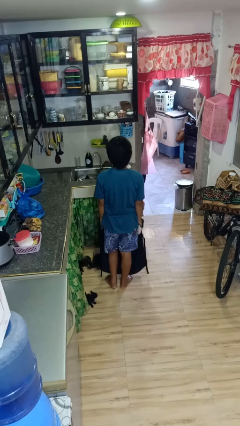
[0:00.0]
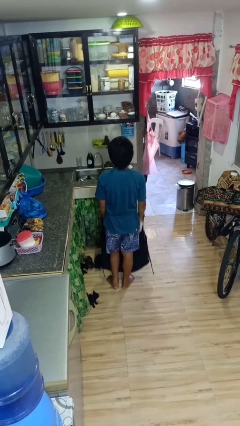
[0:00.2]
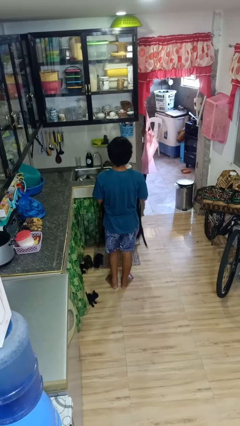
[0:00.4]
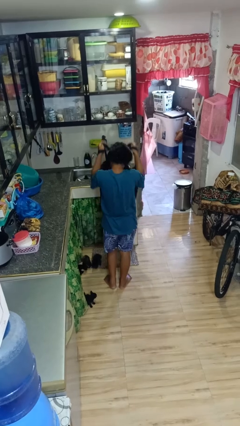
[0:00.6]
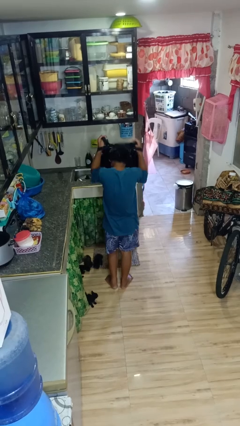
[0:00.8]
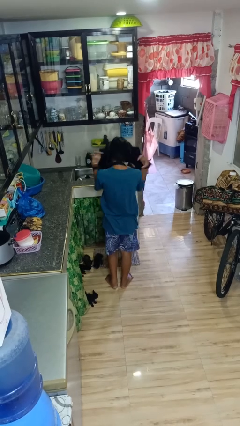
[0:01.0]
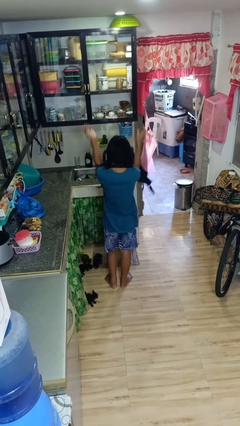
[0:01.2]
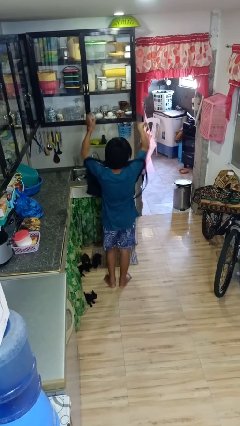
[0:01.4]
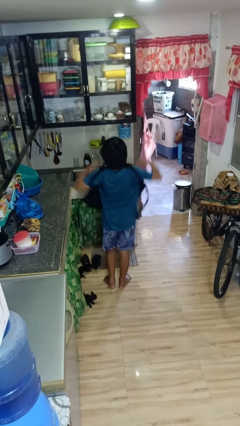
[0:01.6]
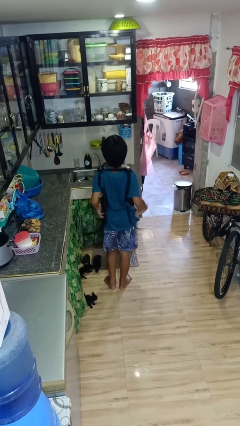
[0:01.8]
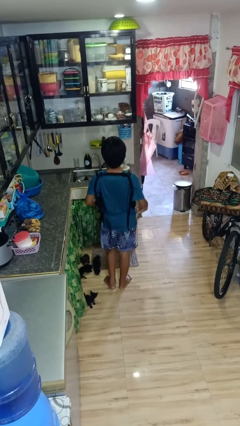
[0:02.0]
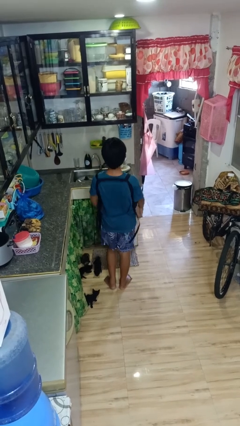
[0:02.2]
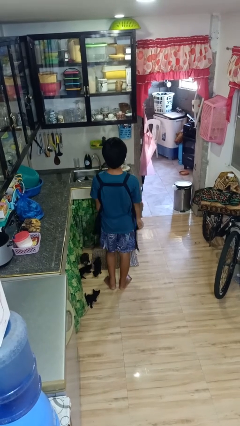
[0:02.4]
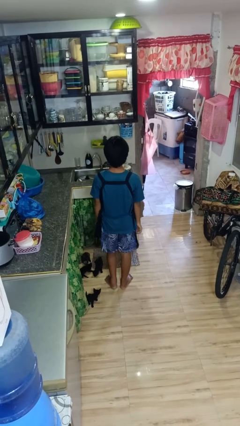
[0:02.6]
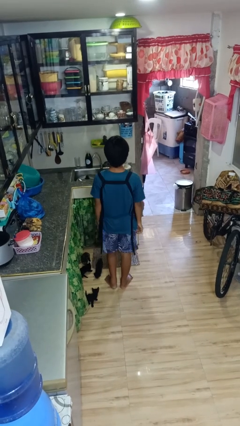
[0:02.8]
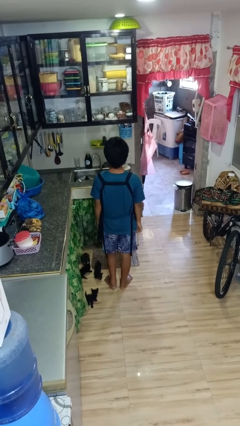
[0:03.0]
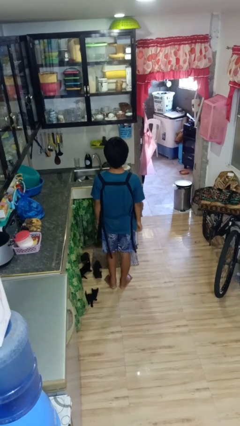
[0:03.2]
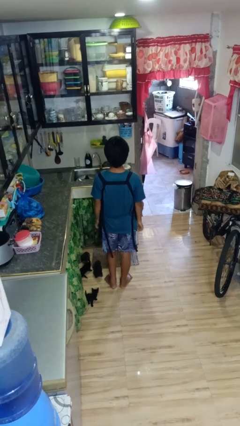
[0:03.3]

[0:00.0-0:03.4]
person puts on apron

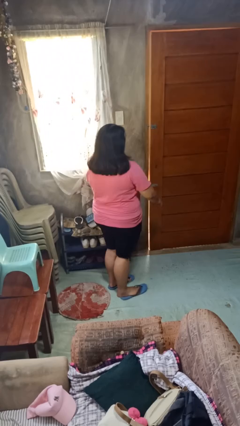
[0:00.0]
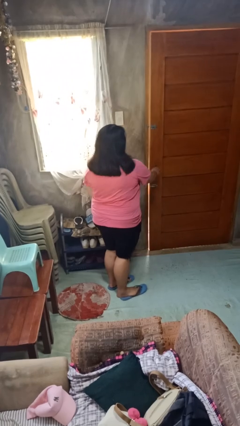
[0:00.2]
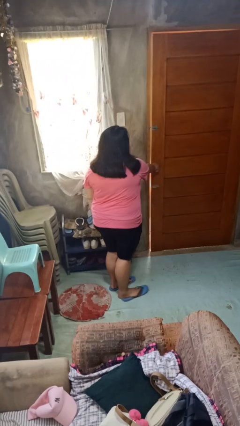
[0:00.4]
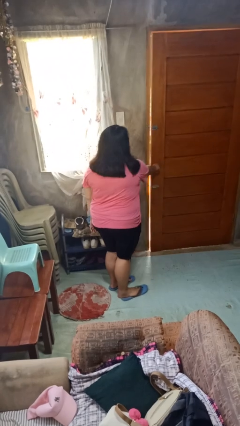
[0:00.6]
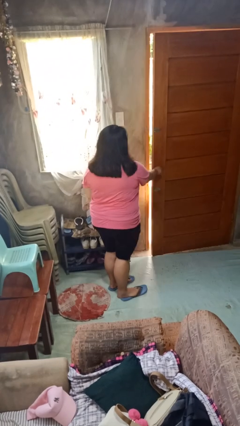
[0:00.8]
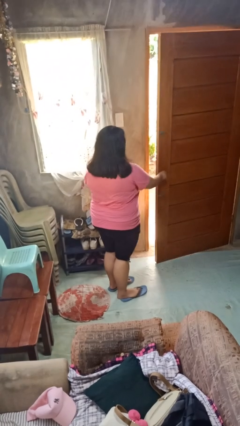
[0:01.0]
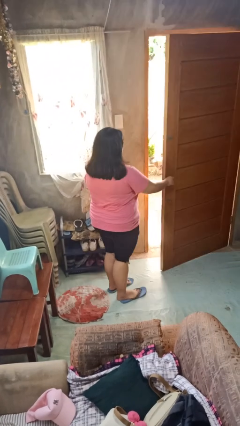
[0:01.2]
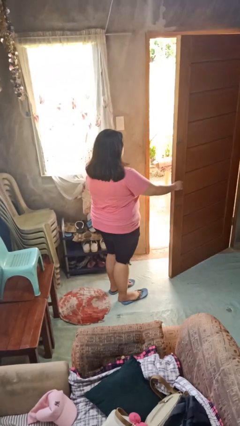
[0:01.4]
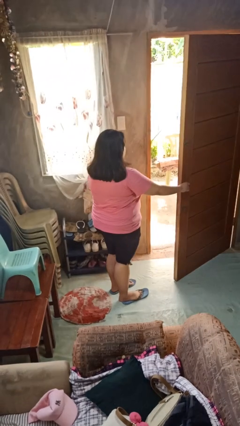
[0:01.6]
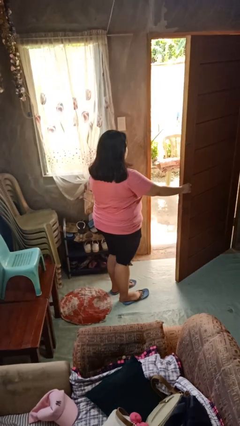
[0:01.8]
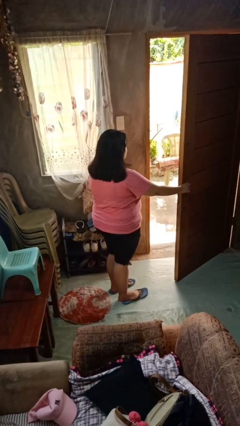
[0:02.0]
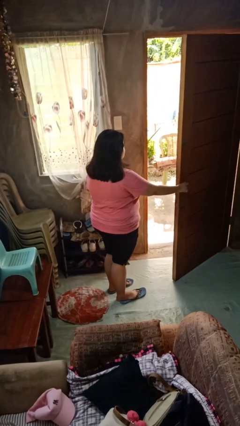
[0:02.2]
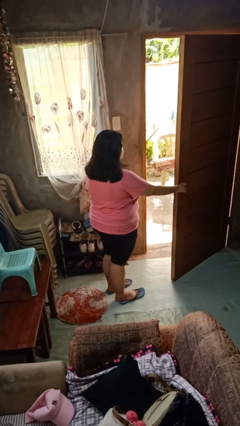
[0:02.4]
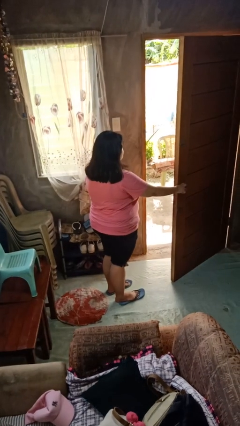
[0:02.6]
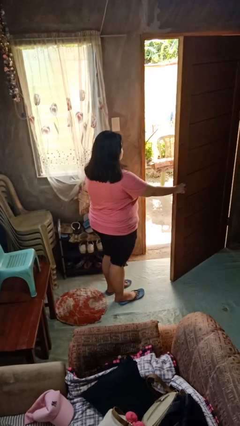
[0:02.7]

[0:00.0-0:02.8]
person opens facility door

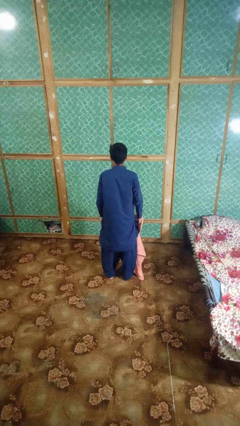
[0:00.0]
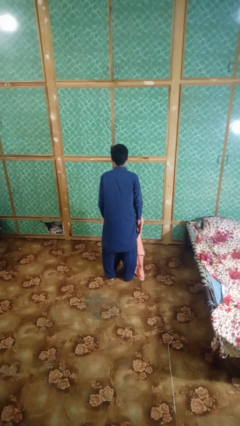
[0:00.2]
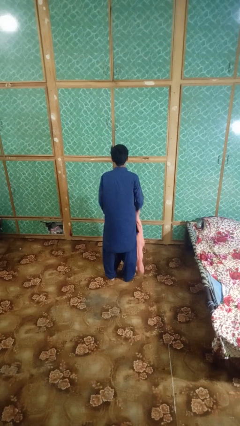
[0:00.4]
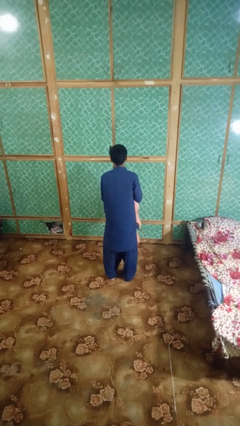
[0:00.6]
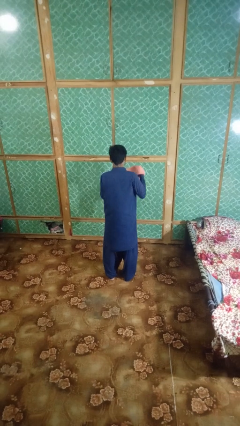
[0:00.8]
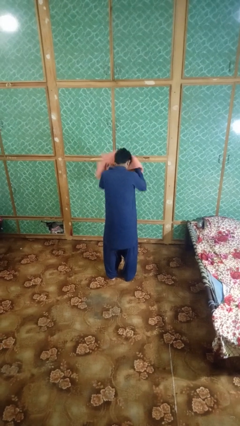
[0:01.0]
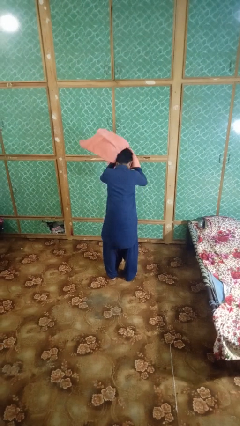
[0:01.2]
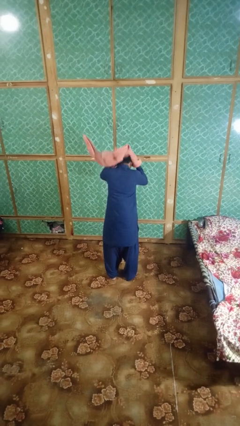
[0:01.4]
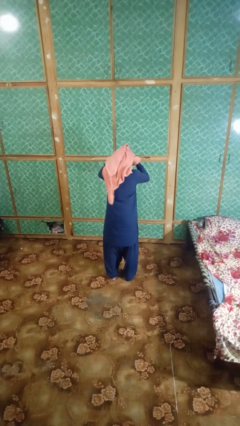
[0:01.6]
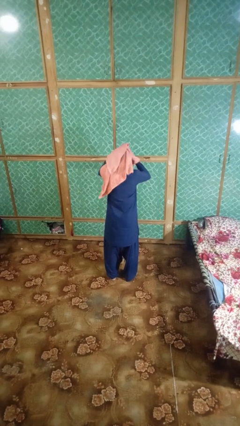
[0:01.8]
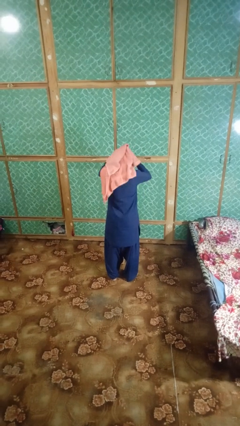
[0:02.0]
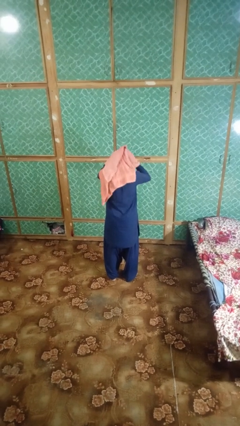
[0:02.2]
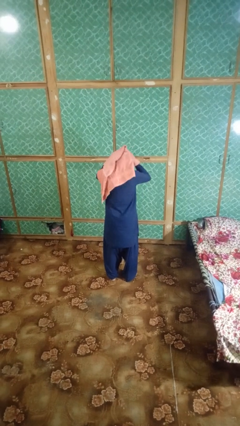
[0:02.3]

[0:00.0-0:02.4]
person dries hair with towel

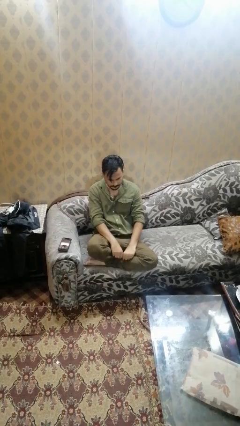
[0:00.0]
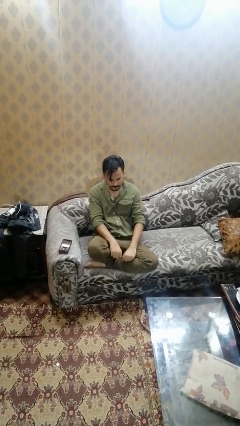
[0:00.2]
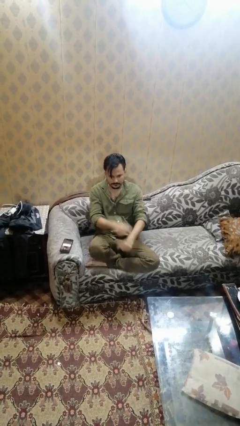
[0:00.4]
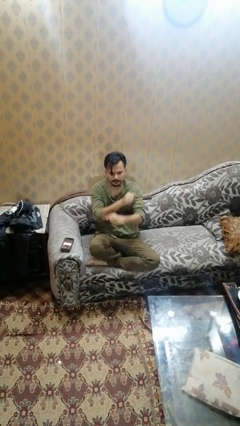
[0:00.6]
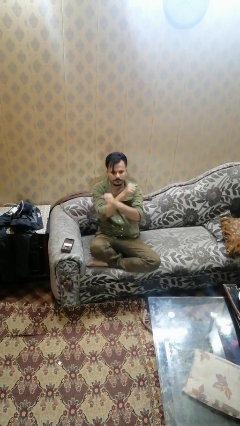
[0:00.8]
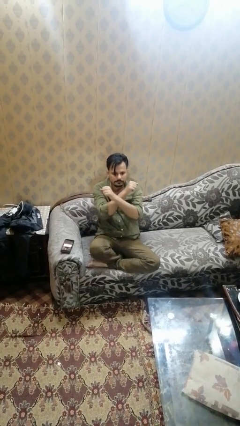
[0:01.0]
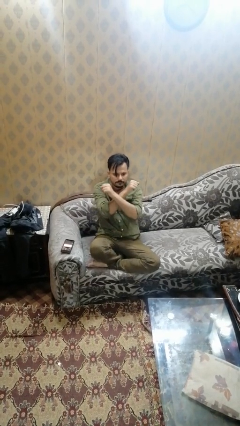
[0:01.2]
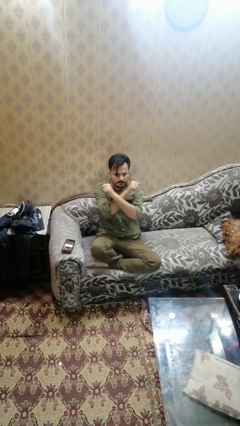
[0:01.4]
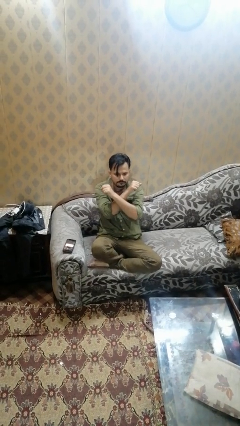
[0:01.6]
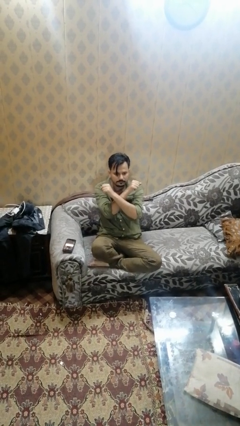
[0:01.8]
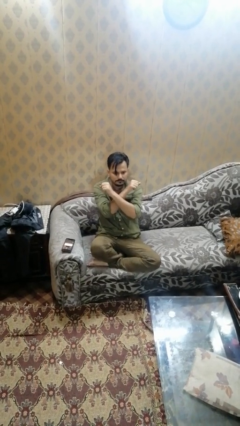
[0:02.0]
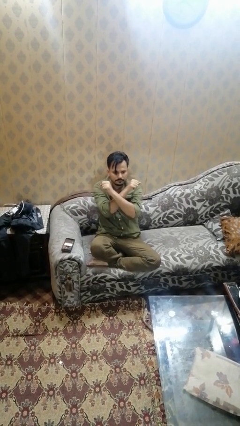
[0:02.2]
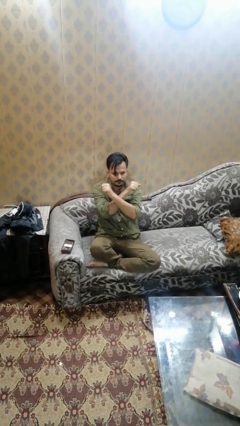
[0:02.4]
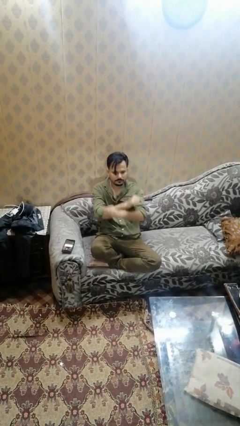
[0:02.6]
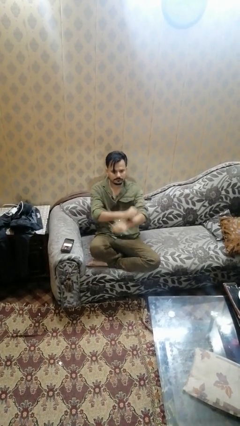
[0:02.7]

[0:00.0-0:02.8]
person gestures arms x

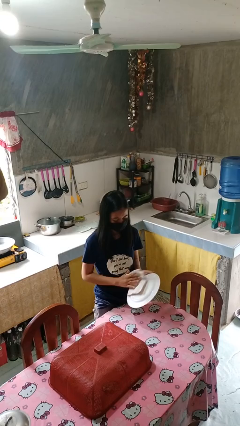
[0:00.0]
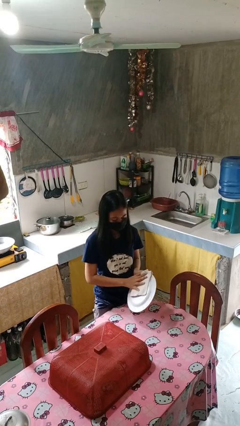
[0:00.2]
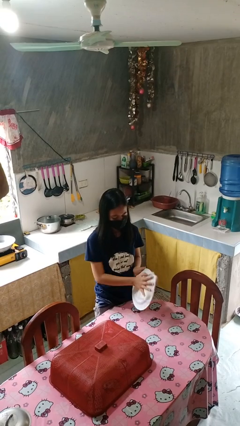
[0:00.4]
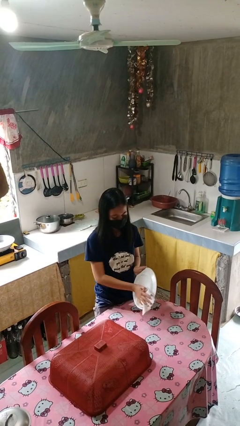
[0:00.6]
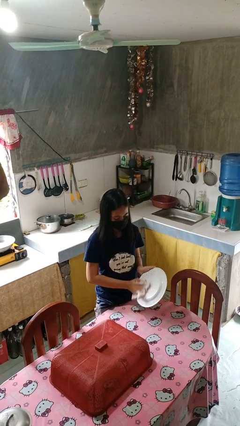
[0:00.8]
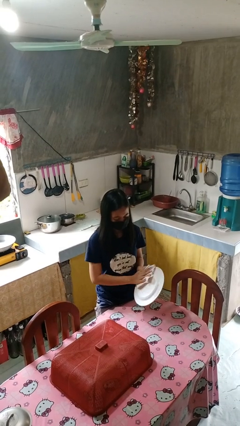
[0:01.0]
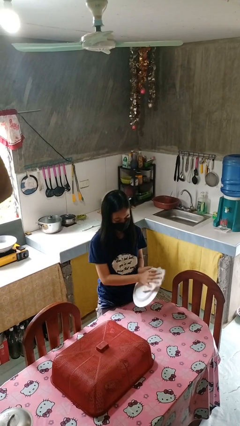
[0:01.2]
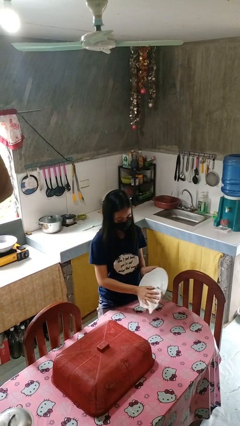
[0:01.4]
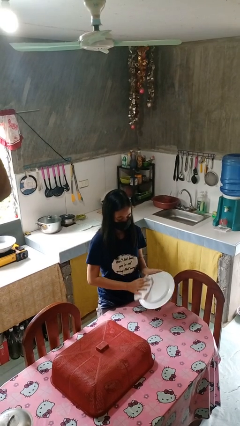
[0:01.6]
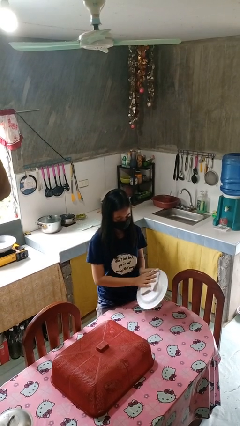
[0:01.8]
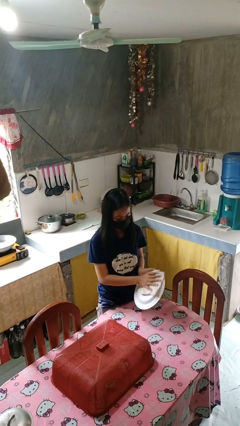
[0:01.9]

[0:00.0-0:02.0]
person dries dish

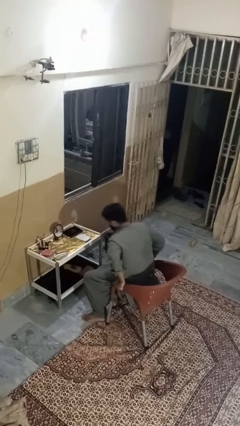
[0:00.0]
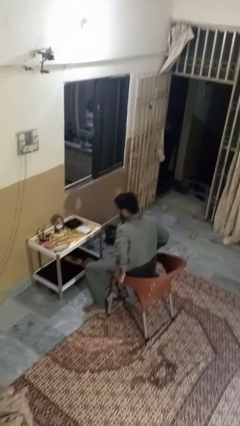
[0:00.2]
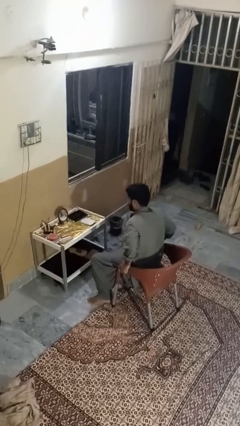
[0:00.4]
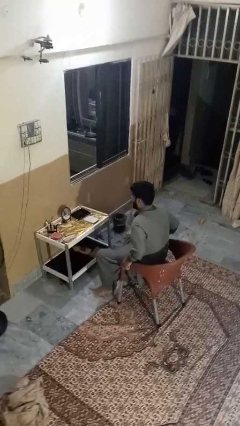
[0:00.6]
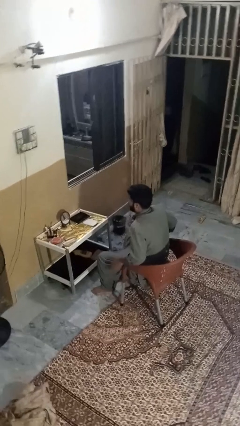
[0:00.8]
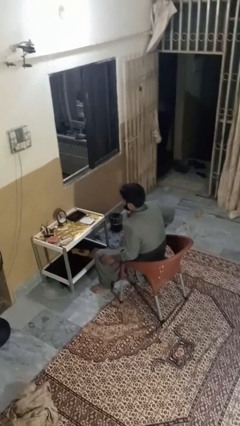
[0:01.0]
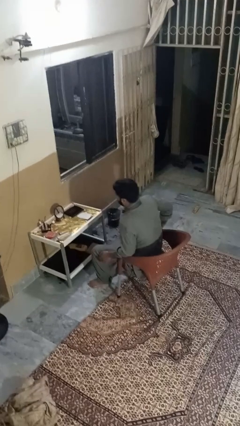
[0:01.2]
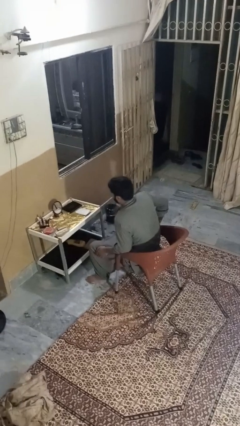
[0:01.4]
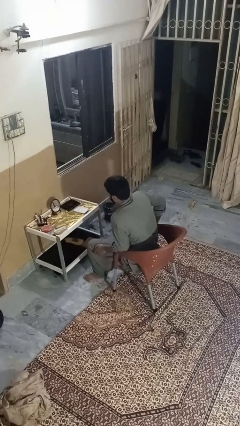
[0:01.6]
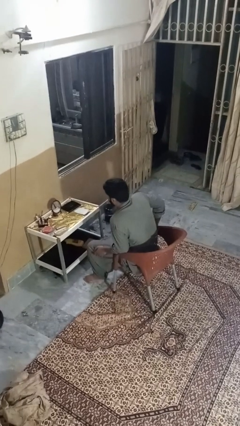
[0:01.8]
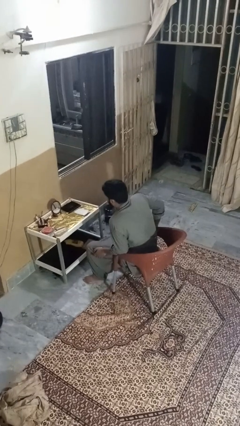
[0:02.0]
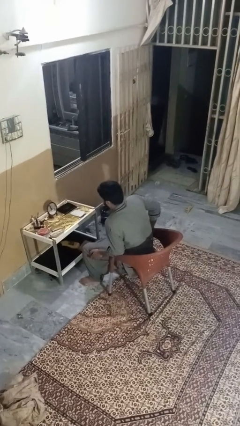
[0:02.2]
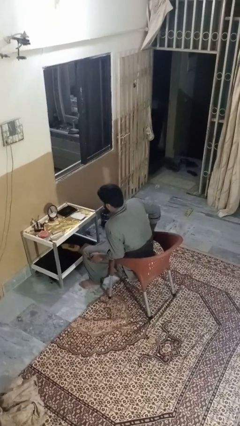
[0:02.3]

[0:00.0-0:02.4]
person sits down

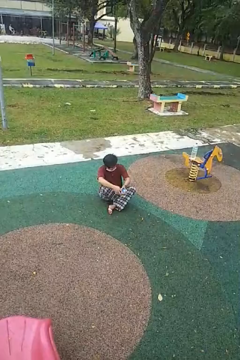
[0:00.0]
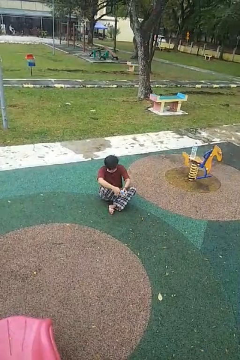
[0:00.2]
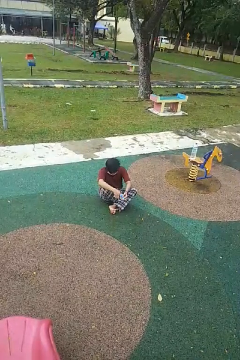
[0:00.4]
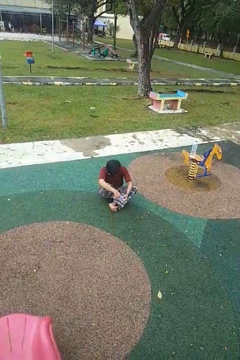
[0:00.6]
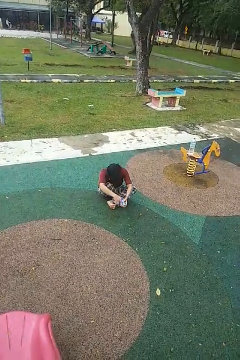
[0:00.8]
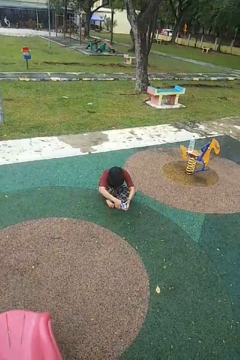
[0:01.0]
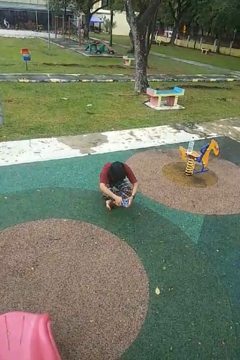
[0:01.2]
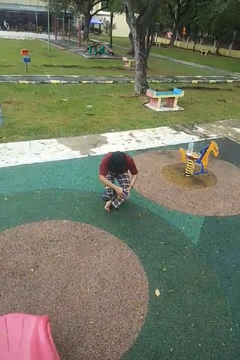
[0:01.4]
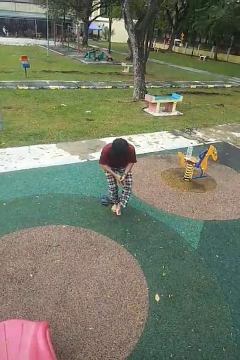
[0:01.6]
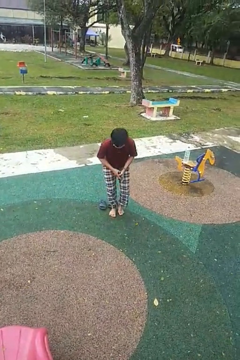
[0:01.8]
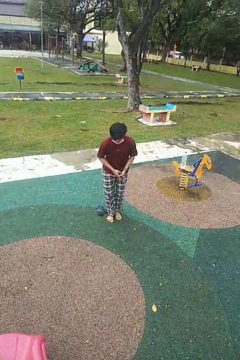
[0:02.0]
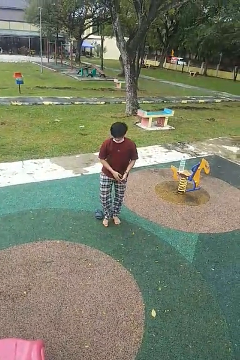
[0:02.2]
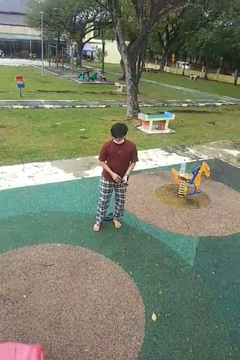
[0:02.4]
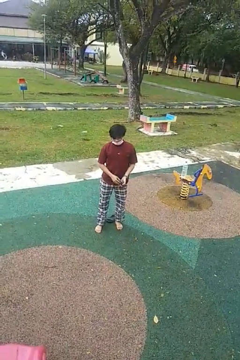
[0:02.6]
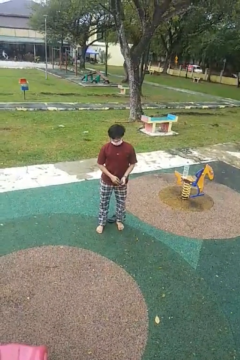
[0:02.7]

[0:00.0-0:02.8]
person stands up from floor
